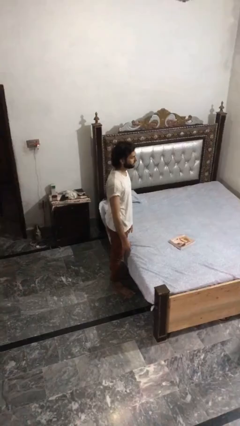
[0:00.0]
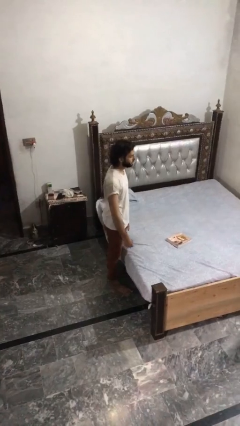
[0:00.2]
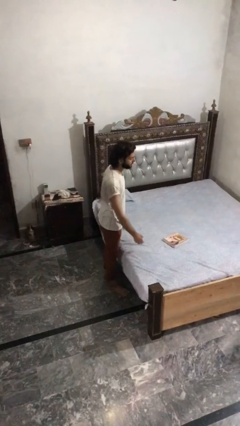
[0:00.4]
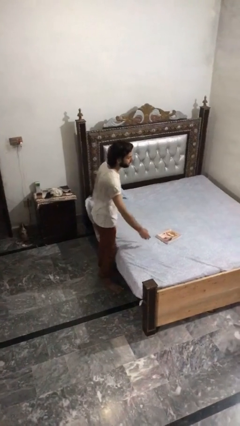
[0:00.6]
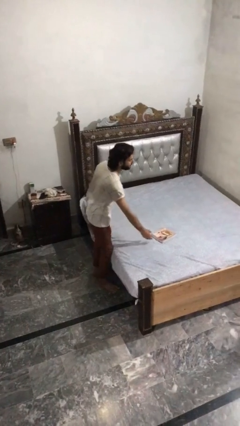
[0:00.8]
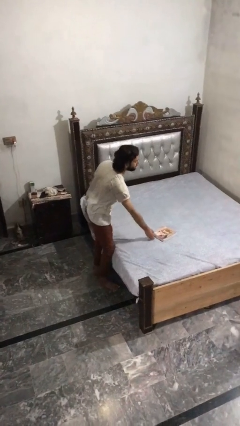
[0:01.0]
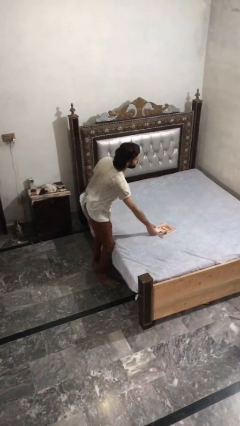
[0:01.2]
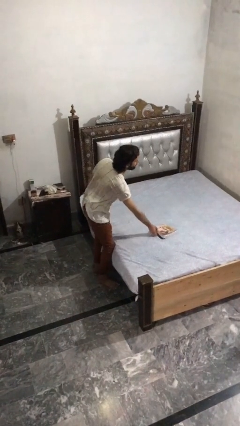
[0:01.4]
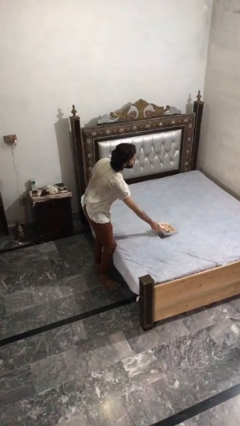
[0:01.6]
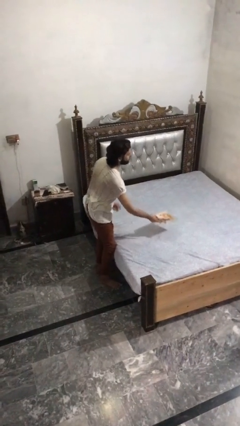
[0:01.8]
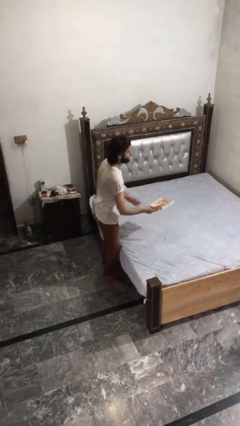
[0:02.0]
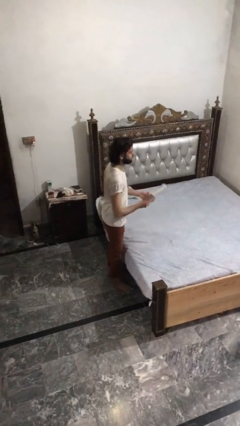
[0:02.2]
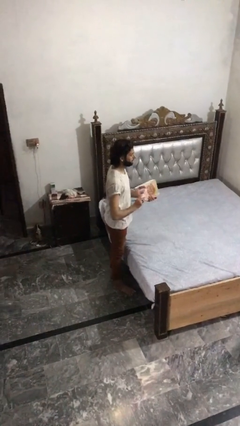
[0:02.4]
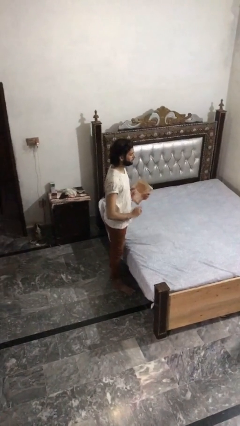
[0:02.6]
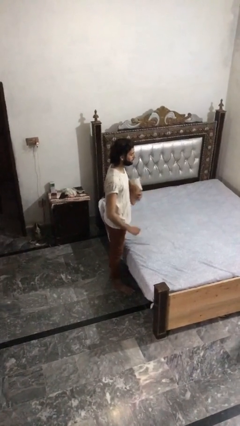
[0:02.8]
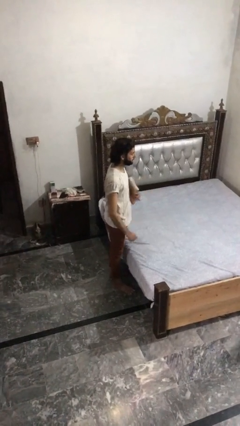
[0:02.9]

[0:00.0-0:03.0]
person picks up object from bed

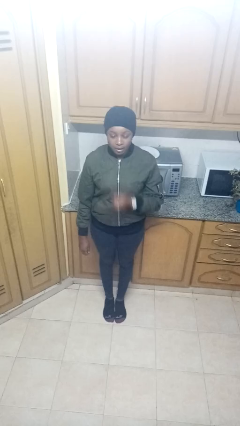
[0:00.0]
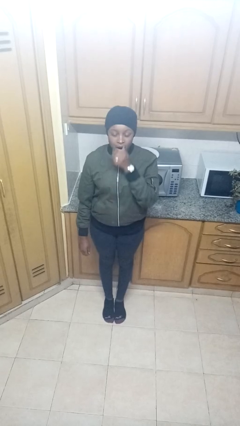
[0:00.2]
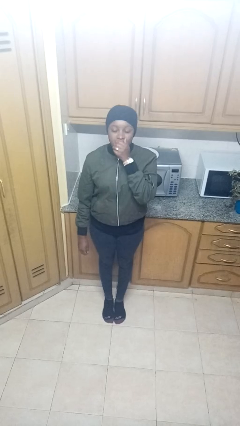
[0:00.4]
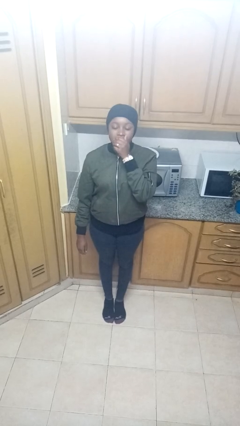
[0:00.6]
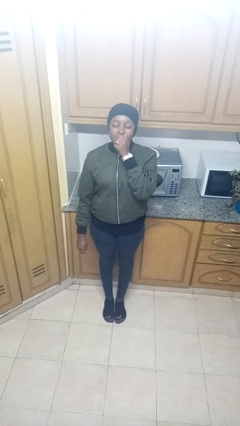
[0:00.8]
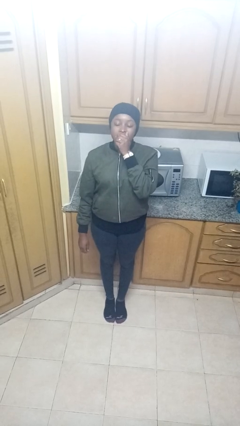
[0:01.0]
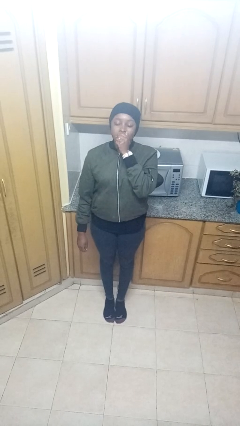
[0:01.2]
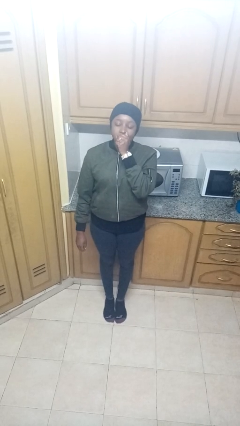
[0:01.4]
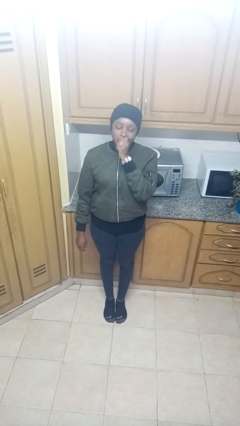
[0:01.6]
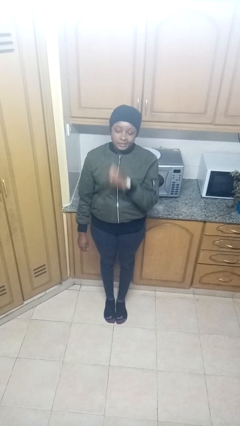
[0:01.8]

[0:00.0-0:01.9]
person yawns

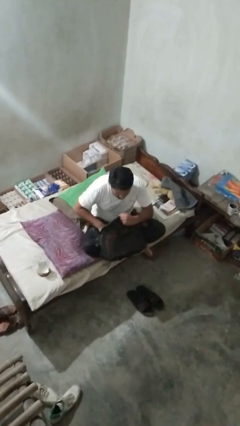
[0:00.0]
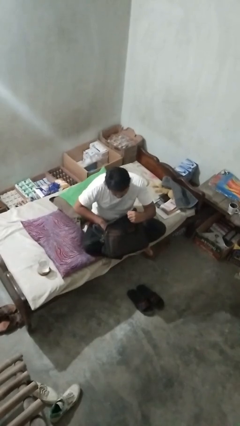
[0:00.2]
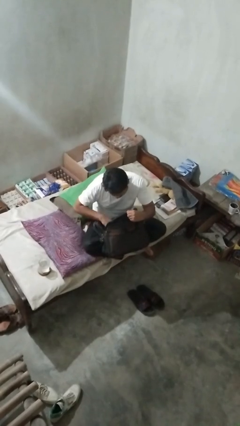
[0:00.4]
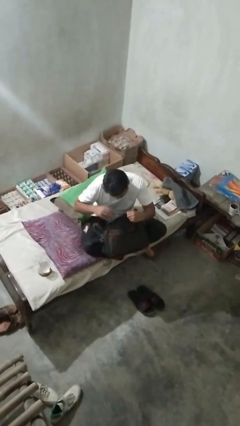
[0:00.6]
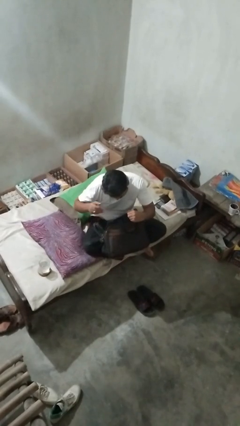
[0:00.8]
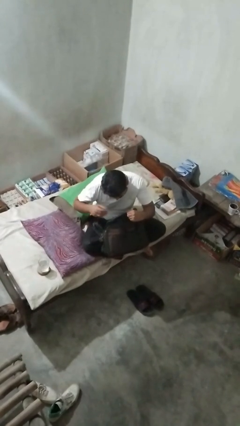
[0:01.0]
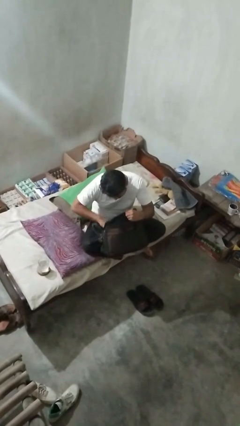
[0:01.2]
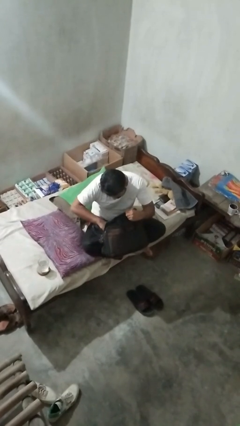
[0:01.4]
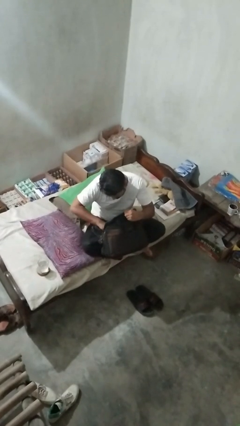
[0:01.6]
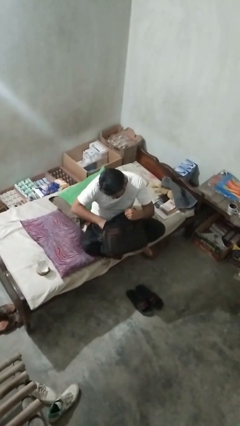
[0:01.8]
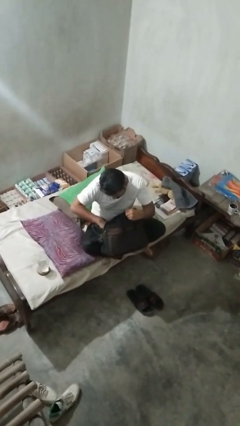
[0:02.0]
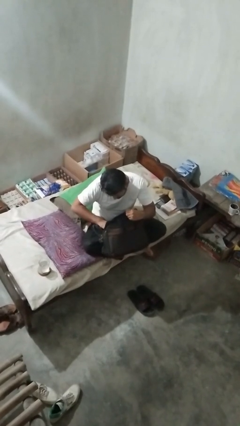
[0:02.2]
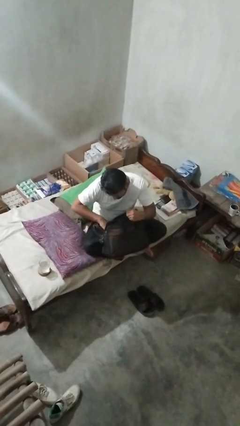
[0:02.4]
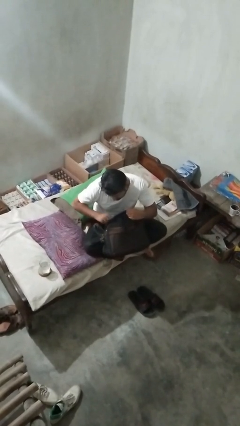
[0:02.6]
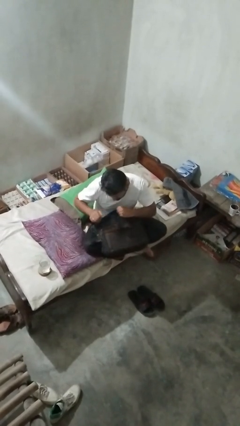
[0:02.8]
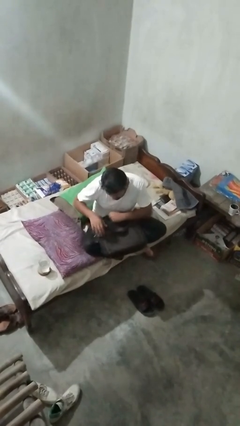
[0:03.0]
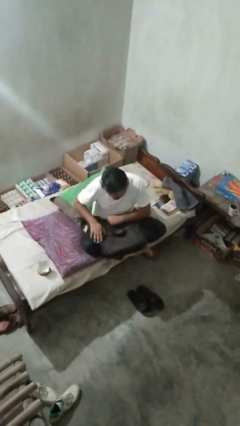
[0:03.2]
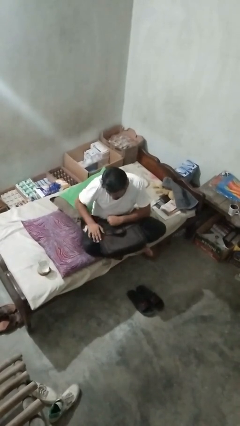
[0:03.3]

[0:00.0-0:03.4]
person searches in bag

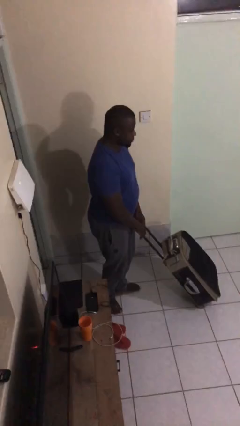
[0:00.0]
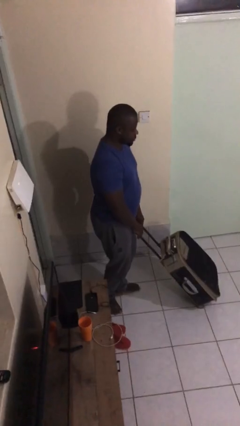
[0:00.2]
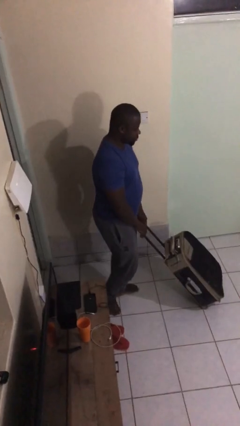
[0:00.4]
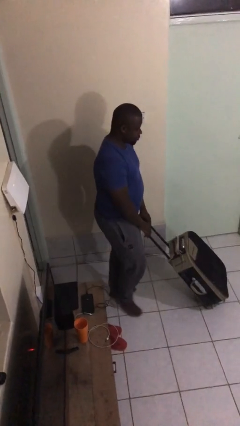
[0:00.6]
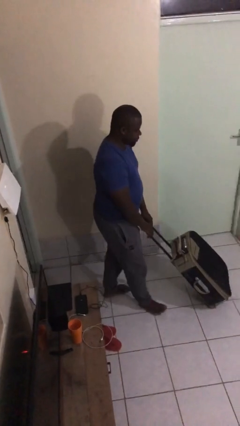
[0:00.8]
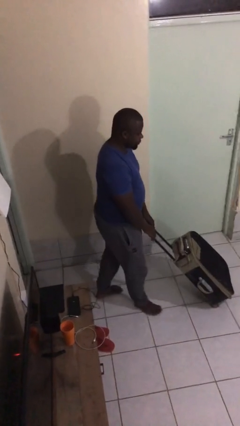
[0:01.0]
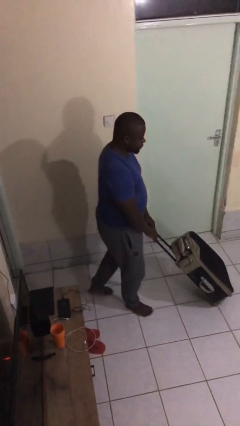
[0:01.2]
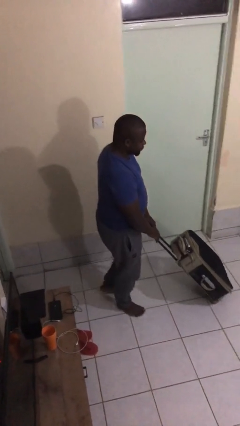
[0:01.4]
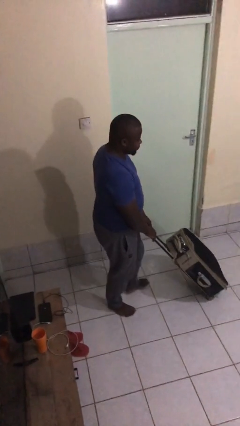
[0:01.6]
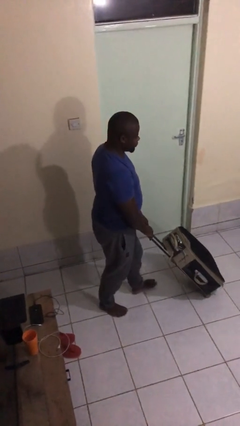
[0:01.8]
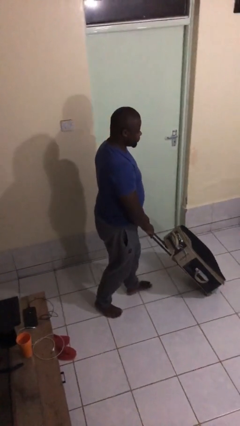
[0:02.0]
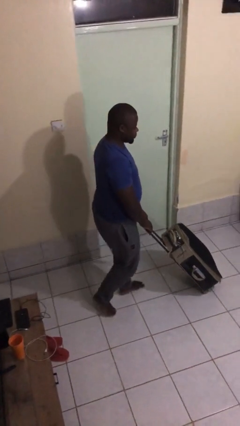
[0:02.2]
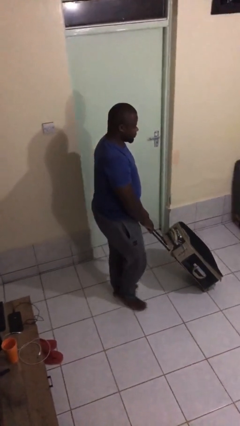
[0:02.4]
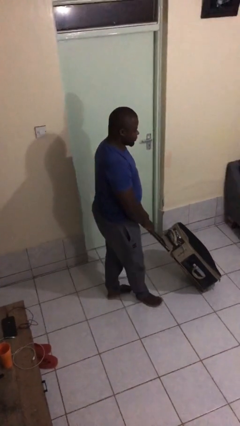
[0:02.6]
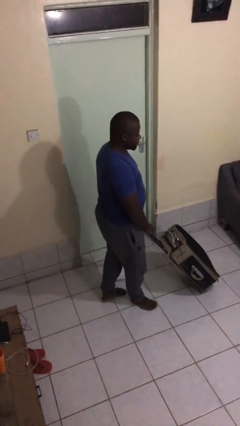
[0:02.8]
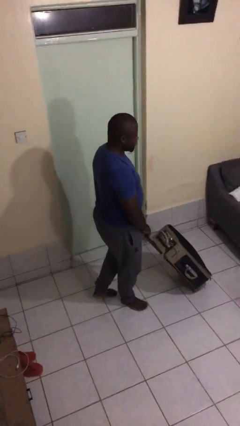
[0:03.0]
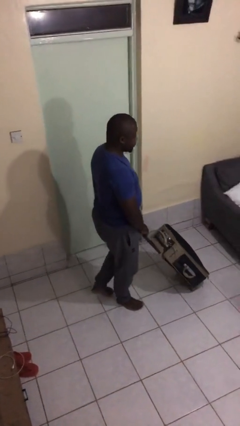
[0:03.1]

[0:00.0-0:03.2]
person pushes wheeled cart

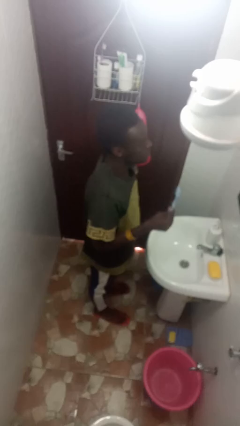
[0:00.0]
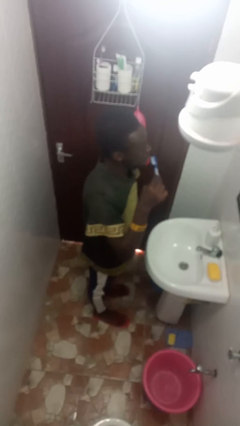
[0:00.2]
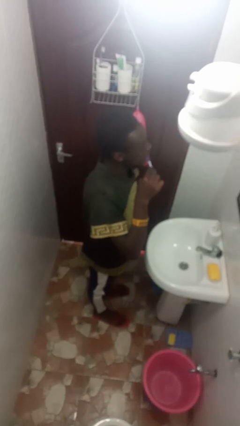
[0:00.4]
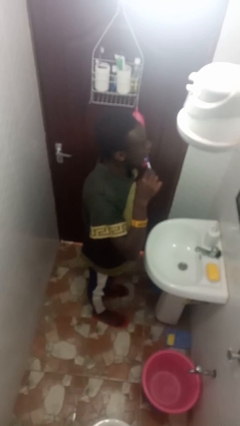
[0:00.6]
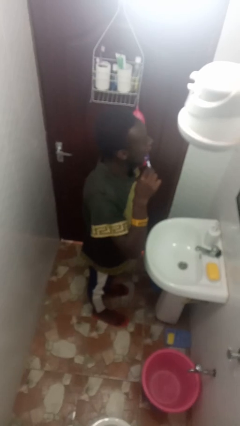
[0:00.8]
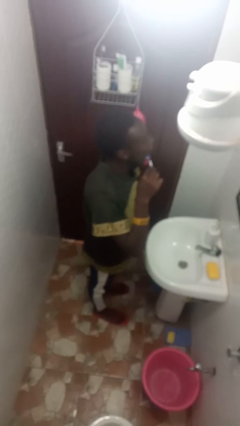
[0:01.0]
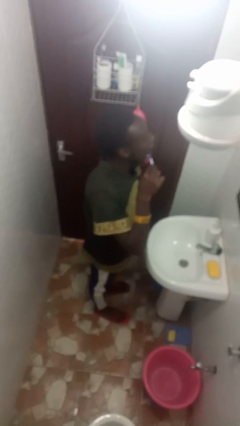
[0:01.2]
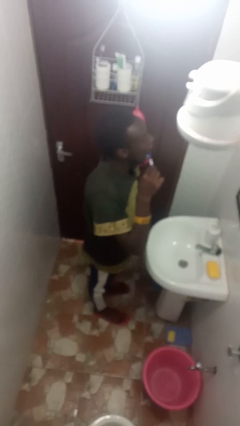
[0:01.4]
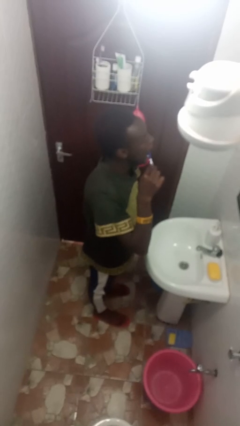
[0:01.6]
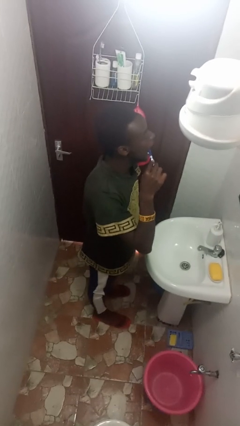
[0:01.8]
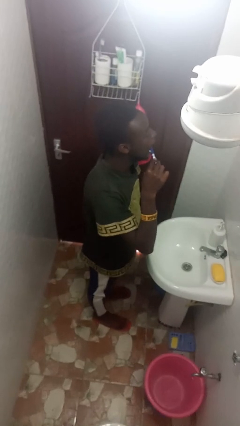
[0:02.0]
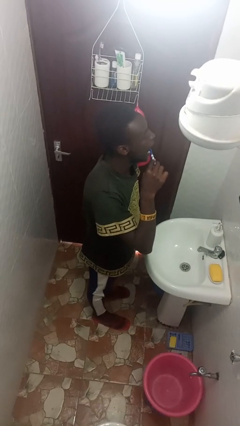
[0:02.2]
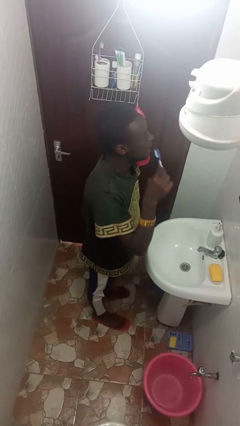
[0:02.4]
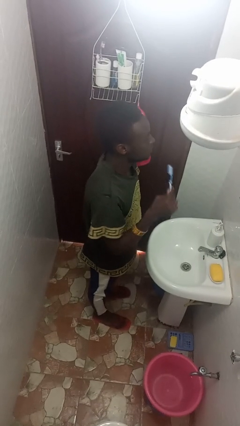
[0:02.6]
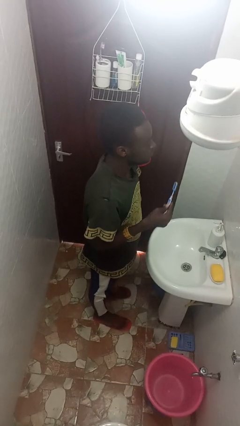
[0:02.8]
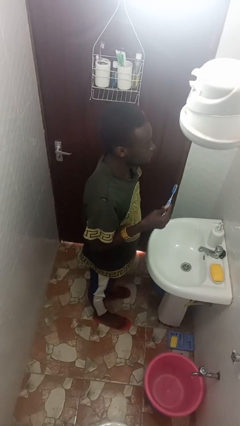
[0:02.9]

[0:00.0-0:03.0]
person brushes teeth

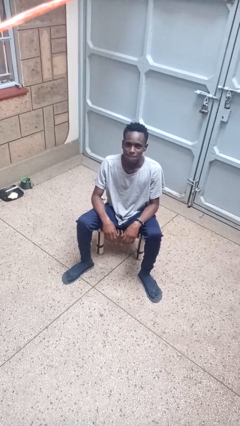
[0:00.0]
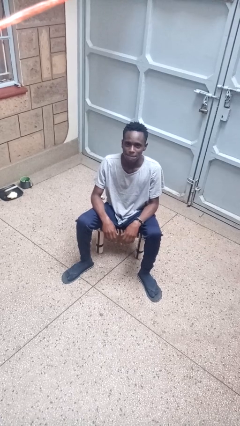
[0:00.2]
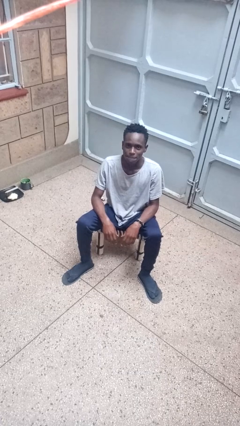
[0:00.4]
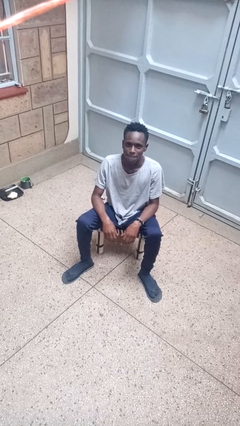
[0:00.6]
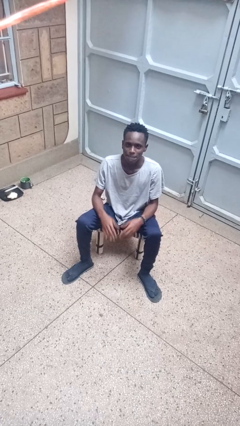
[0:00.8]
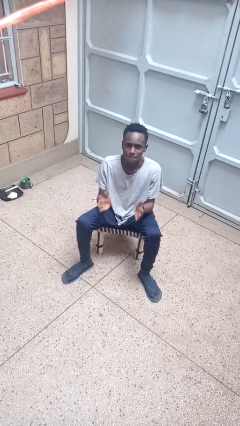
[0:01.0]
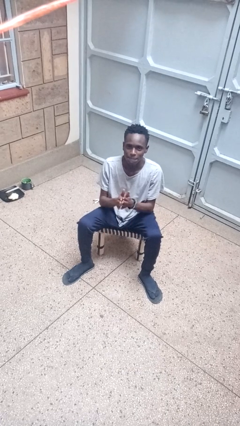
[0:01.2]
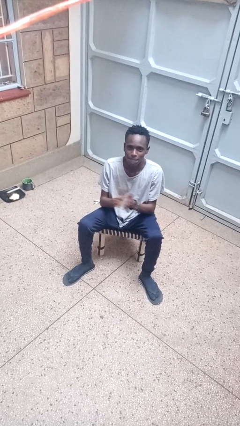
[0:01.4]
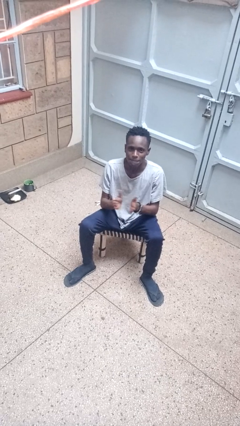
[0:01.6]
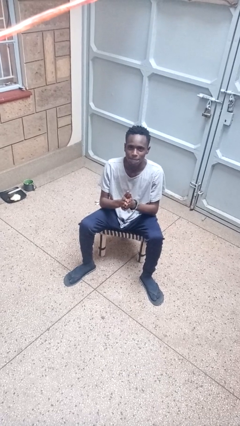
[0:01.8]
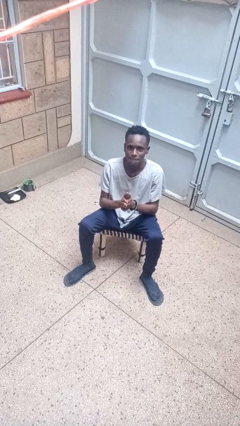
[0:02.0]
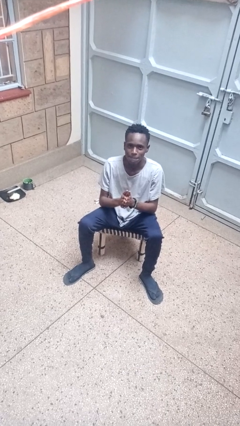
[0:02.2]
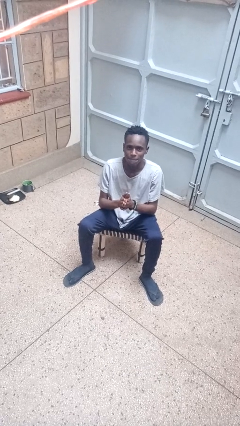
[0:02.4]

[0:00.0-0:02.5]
person claps hands

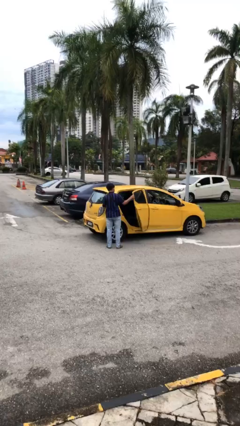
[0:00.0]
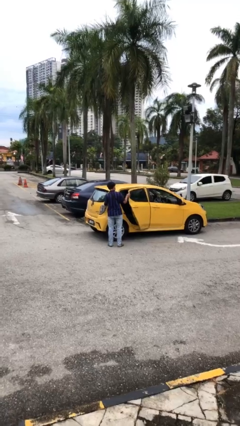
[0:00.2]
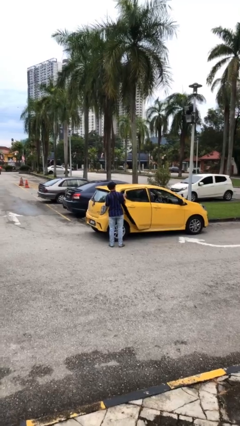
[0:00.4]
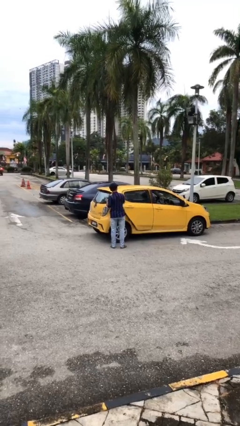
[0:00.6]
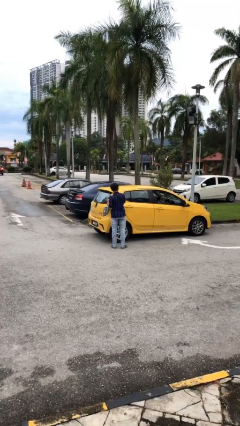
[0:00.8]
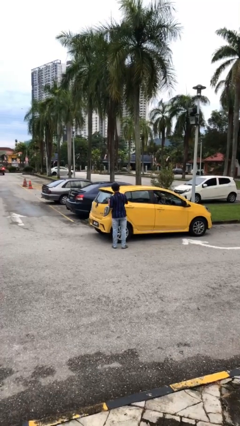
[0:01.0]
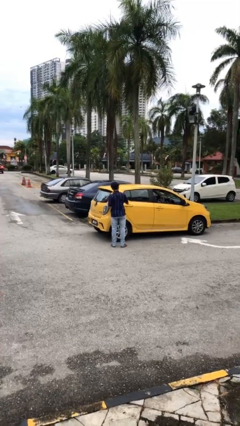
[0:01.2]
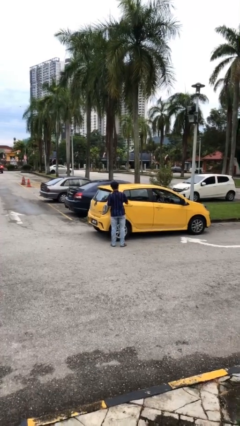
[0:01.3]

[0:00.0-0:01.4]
person closes car door
